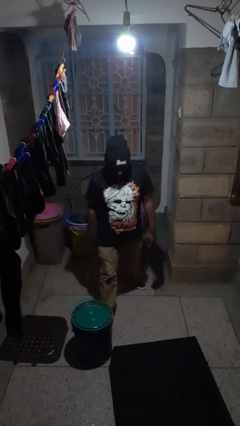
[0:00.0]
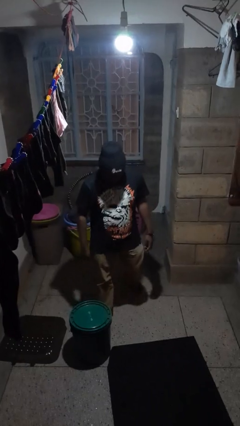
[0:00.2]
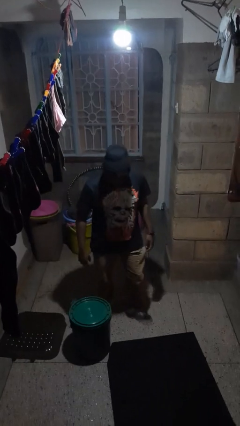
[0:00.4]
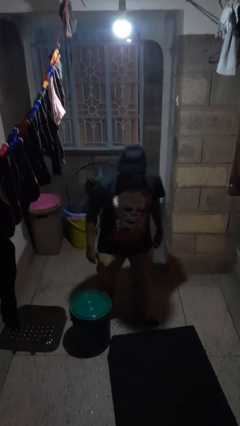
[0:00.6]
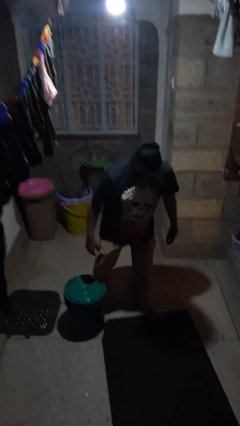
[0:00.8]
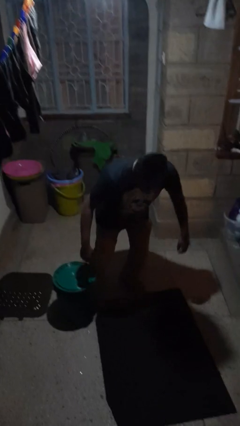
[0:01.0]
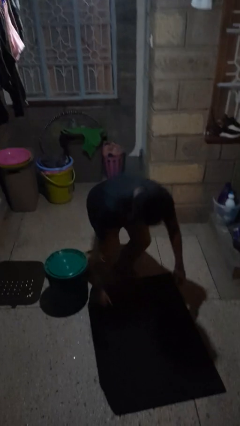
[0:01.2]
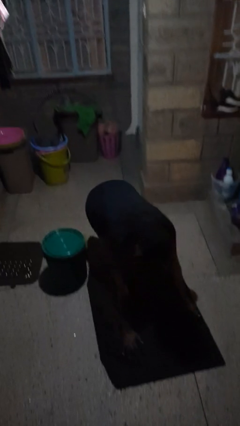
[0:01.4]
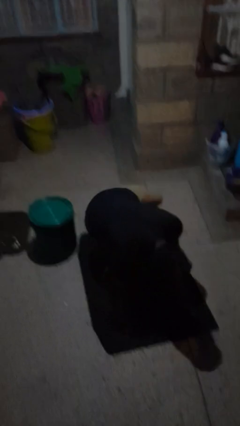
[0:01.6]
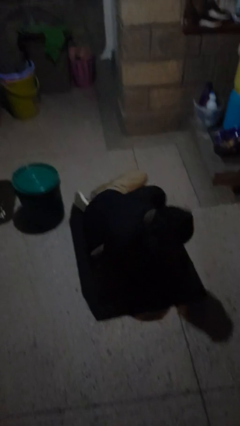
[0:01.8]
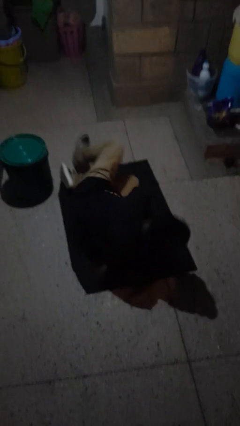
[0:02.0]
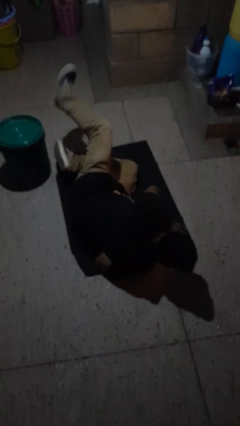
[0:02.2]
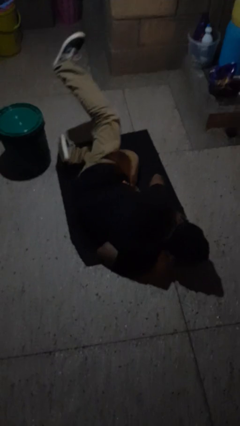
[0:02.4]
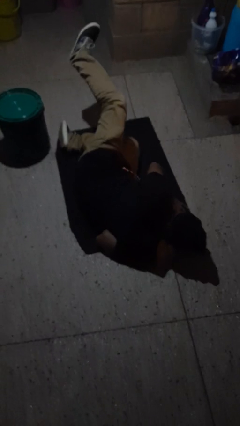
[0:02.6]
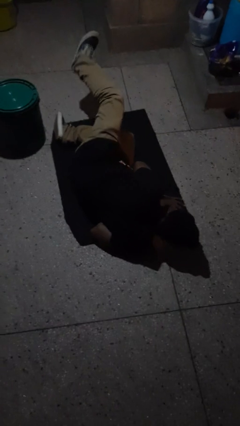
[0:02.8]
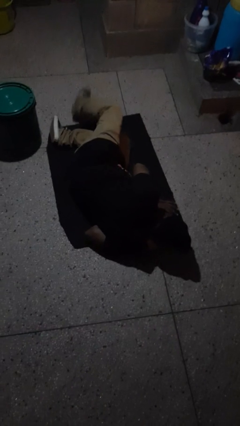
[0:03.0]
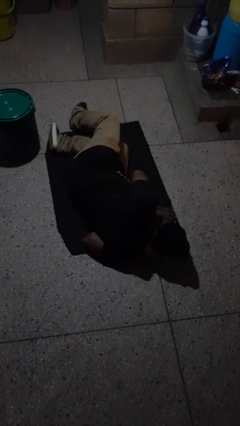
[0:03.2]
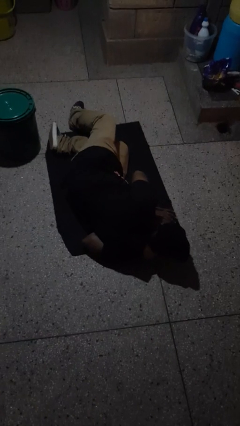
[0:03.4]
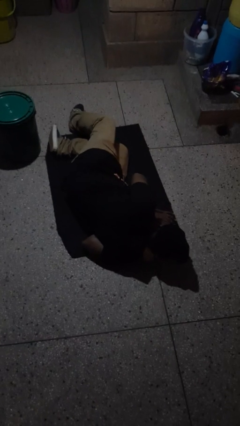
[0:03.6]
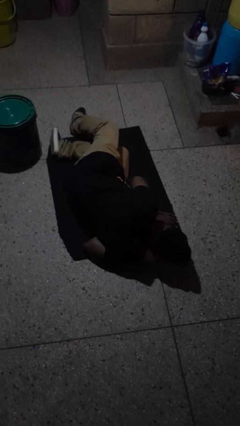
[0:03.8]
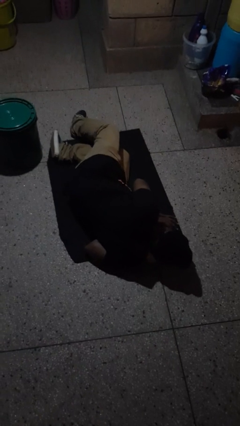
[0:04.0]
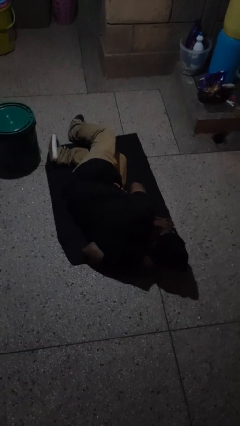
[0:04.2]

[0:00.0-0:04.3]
person trips on object on floor

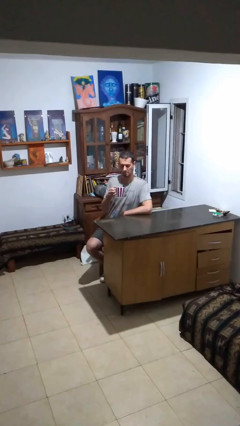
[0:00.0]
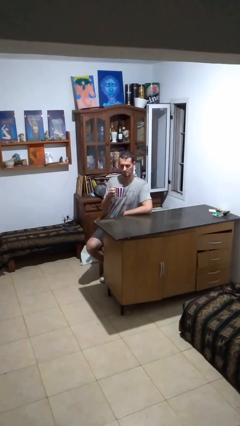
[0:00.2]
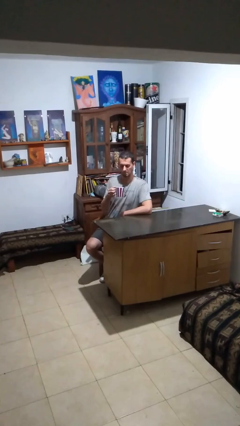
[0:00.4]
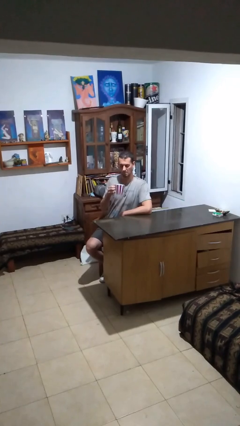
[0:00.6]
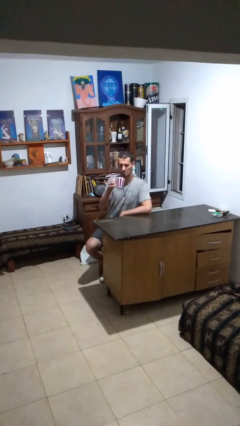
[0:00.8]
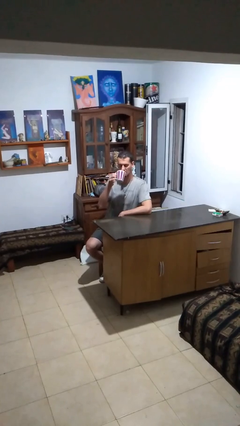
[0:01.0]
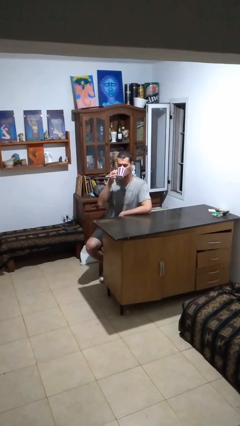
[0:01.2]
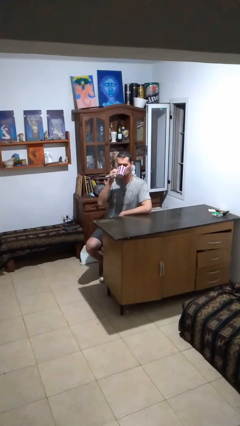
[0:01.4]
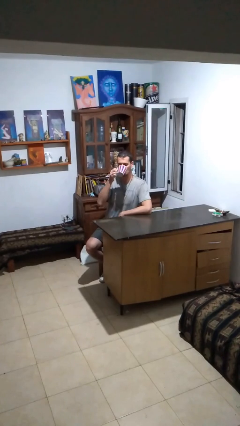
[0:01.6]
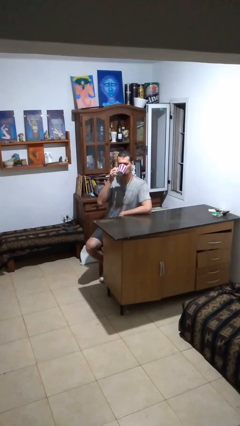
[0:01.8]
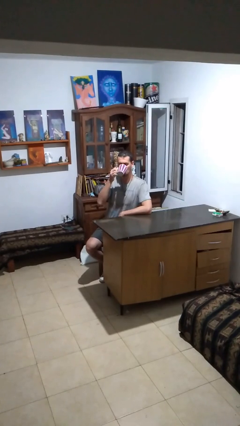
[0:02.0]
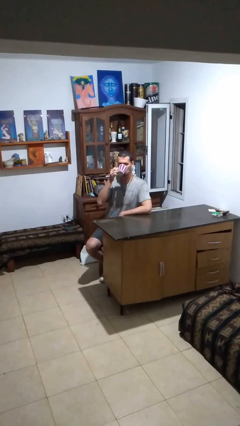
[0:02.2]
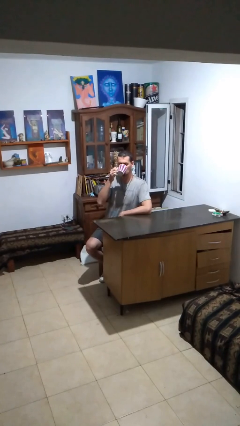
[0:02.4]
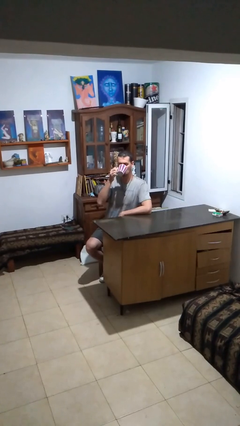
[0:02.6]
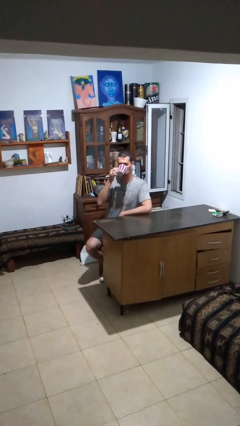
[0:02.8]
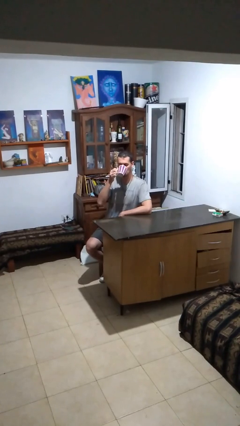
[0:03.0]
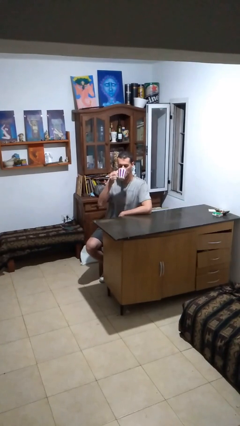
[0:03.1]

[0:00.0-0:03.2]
person drinks from mug

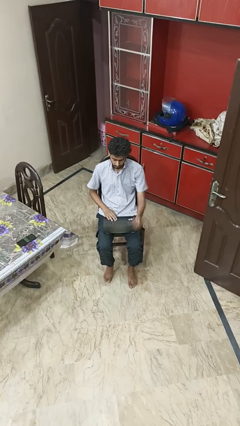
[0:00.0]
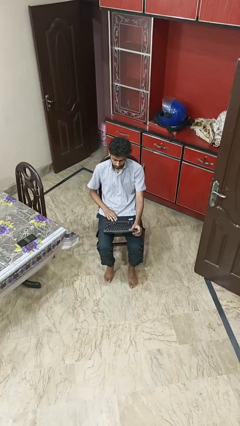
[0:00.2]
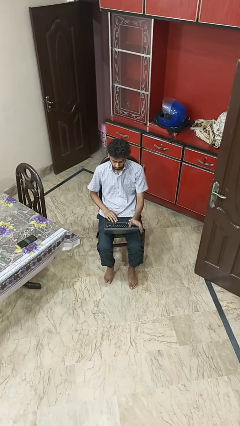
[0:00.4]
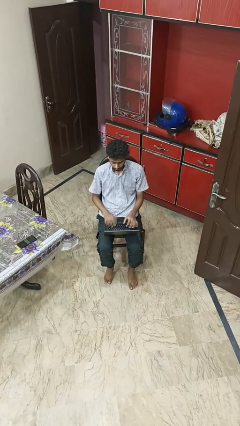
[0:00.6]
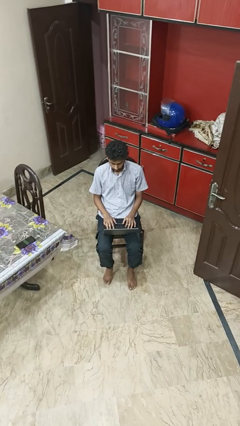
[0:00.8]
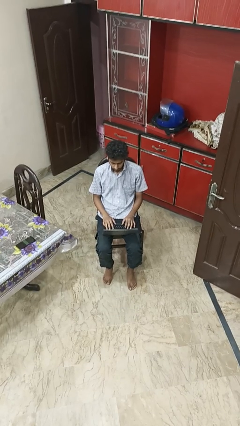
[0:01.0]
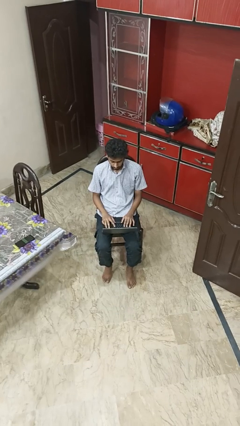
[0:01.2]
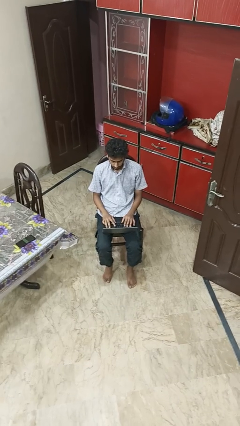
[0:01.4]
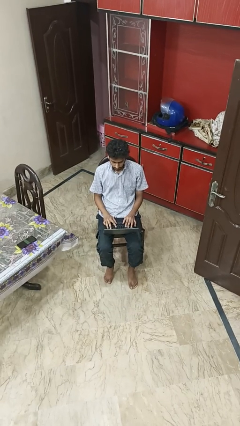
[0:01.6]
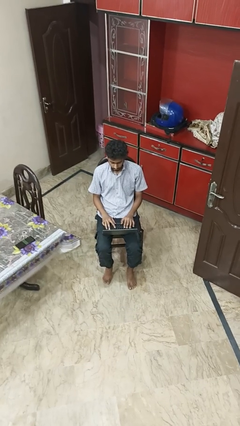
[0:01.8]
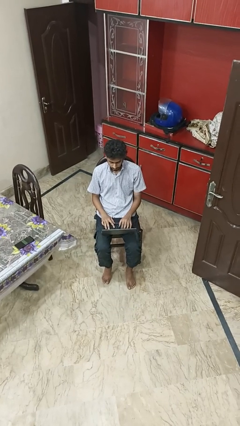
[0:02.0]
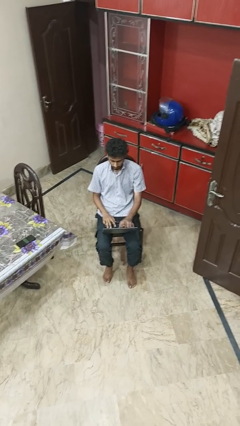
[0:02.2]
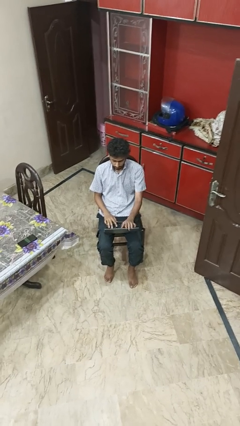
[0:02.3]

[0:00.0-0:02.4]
person opens laptop

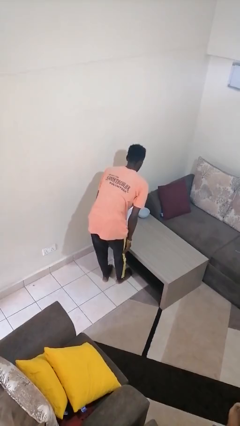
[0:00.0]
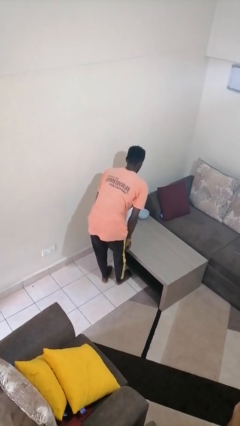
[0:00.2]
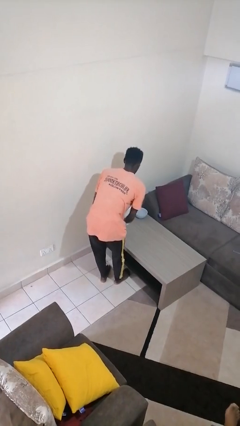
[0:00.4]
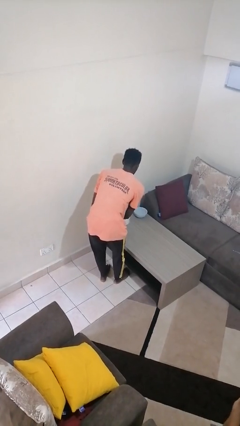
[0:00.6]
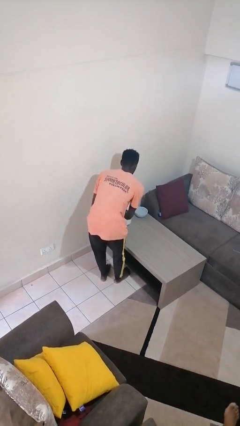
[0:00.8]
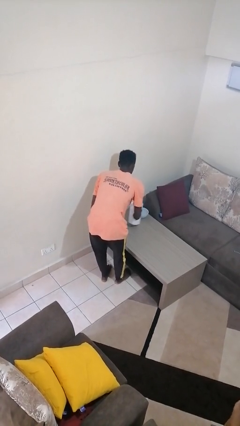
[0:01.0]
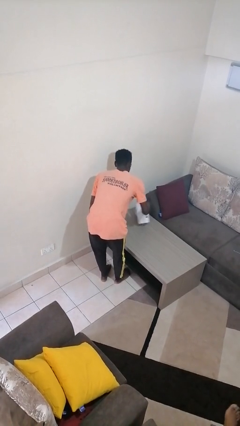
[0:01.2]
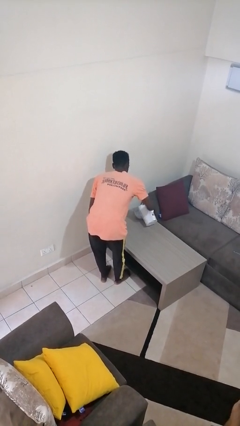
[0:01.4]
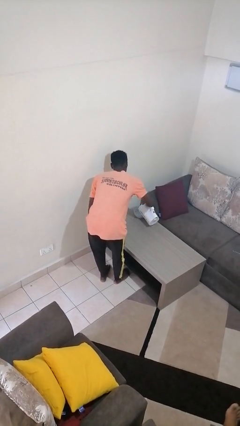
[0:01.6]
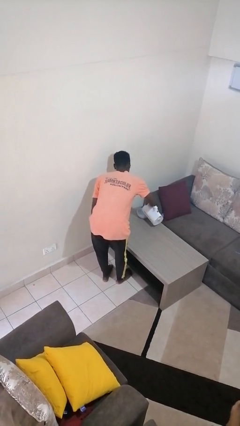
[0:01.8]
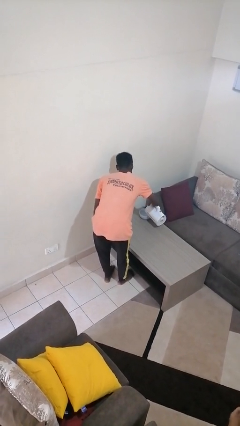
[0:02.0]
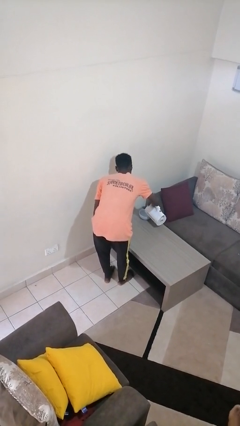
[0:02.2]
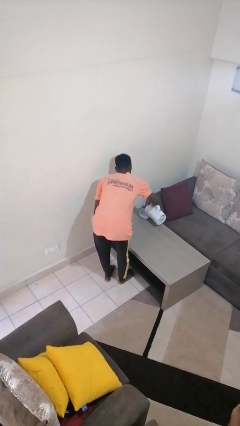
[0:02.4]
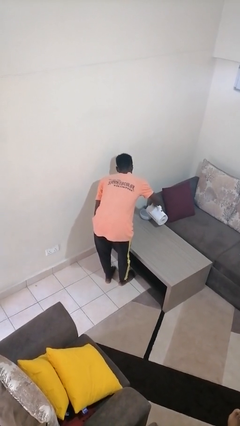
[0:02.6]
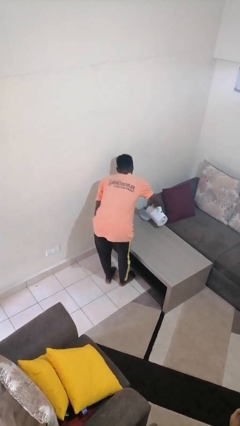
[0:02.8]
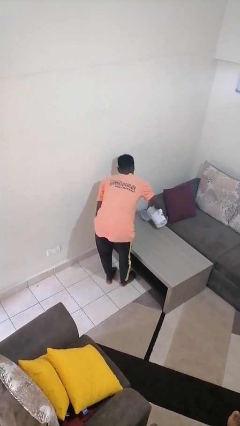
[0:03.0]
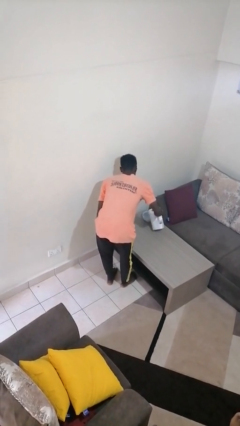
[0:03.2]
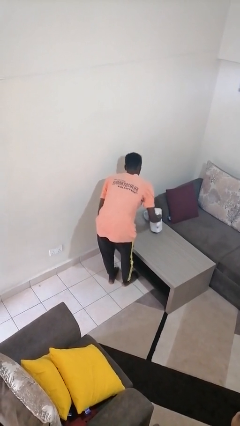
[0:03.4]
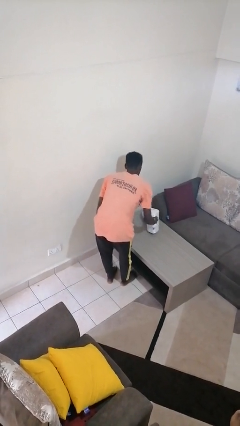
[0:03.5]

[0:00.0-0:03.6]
person pours into bowl

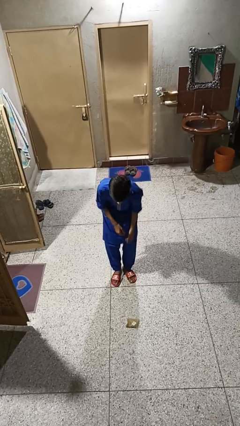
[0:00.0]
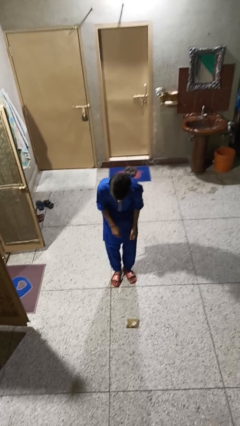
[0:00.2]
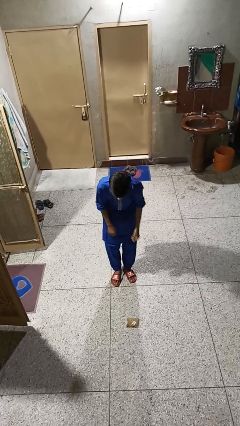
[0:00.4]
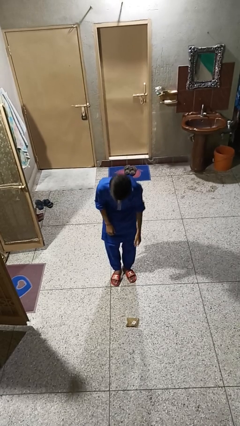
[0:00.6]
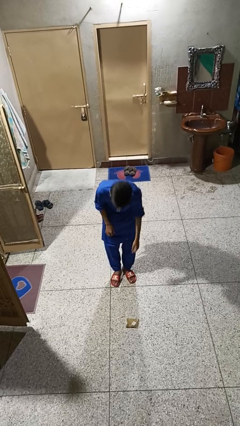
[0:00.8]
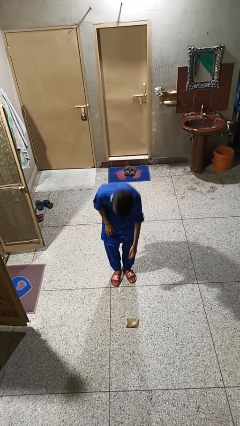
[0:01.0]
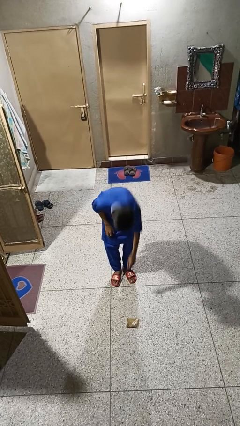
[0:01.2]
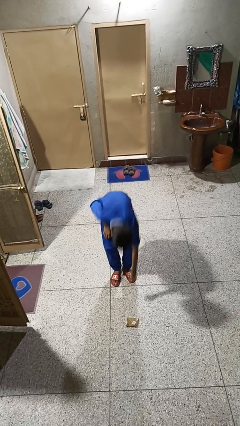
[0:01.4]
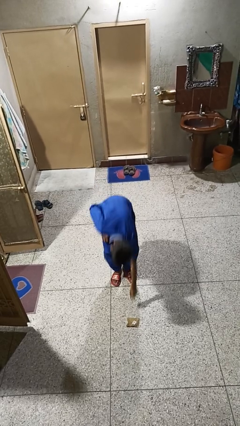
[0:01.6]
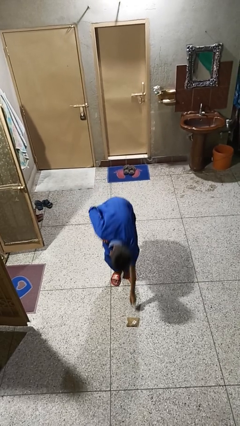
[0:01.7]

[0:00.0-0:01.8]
person picks up object from floor

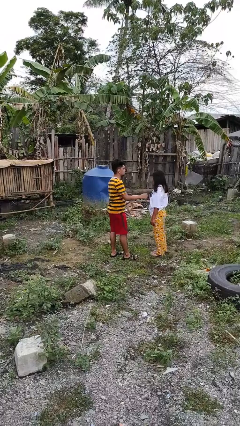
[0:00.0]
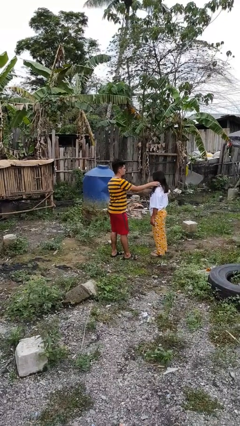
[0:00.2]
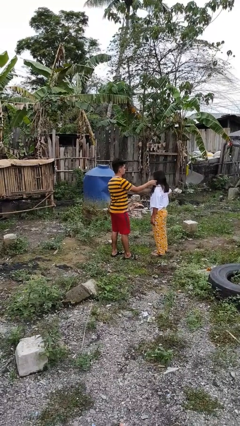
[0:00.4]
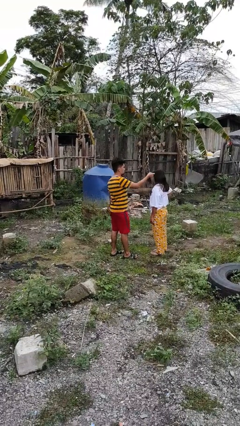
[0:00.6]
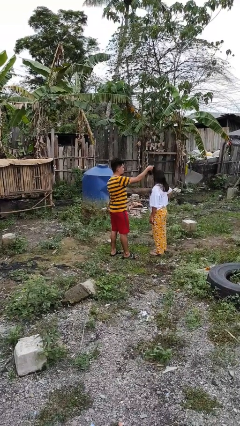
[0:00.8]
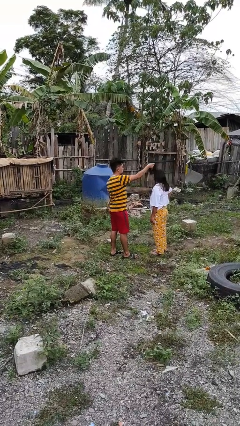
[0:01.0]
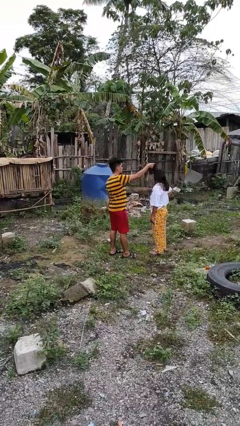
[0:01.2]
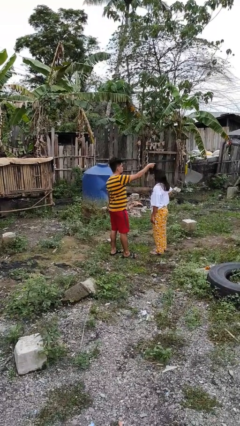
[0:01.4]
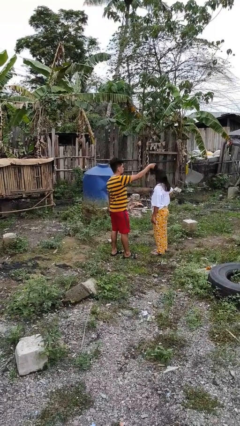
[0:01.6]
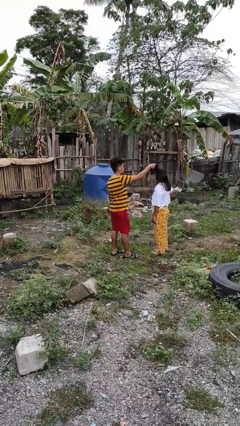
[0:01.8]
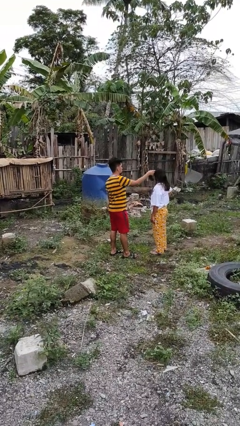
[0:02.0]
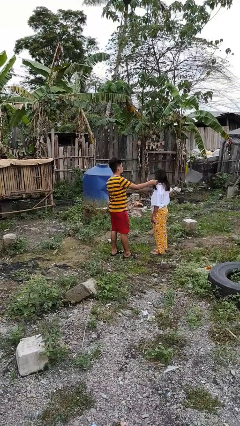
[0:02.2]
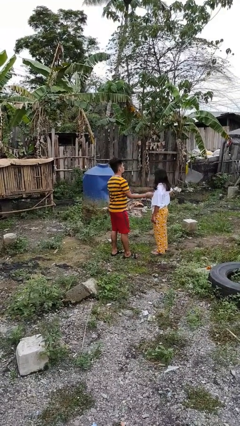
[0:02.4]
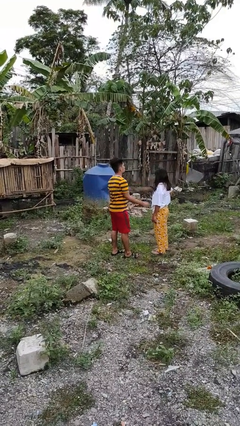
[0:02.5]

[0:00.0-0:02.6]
person grabs person by hair
